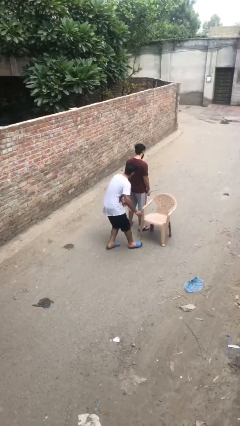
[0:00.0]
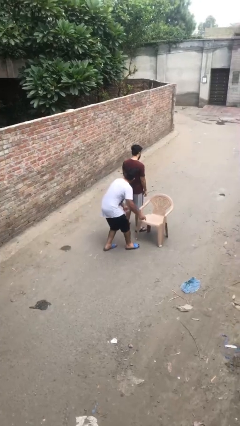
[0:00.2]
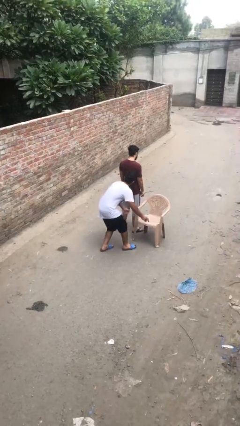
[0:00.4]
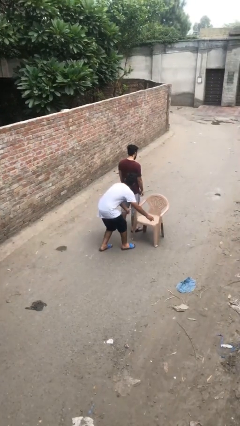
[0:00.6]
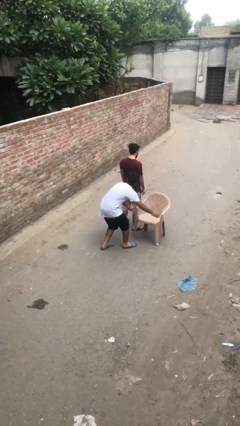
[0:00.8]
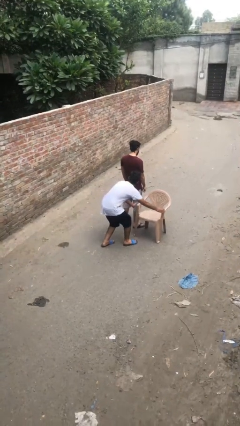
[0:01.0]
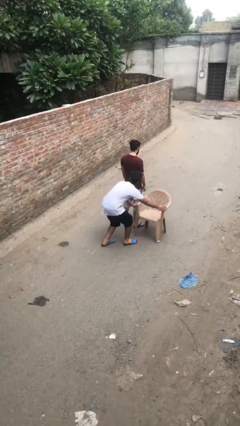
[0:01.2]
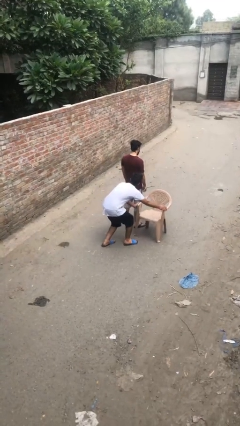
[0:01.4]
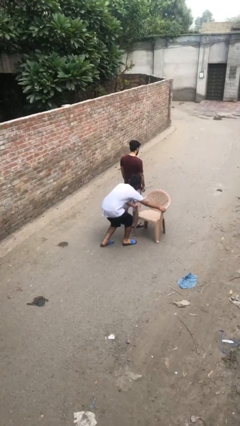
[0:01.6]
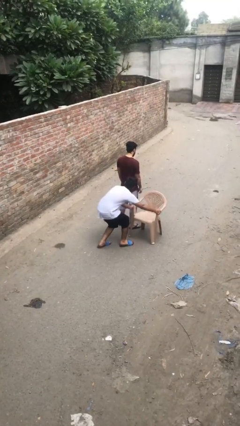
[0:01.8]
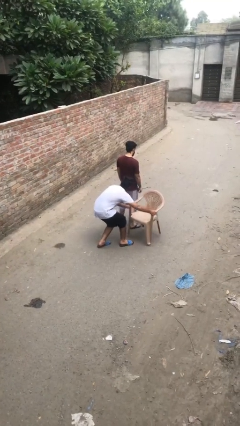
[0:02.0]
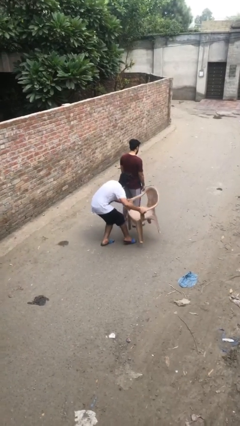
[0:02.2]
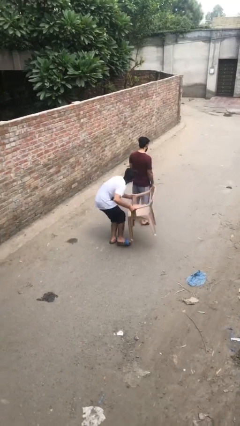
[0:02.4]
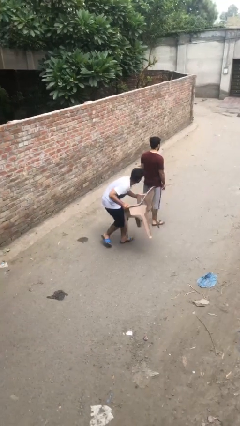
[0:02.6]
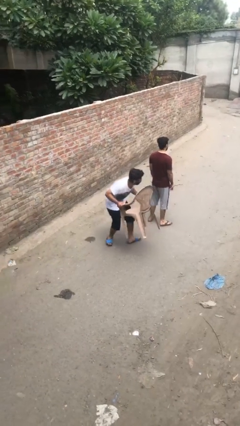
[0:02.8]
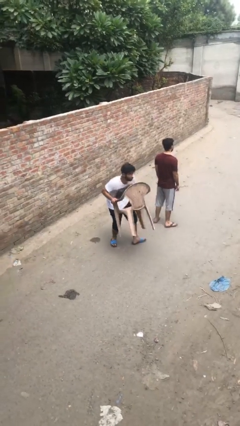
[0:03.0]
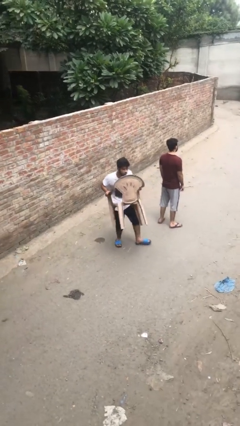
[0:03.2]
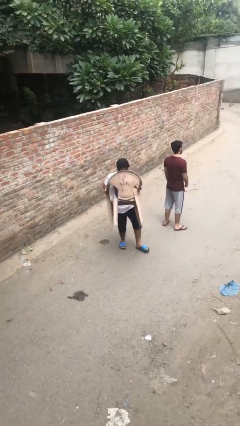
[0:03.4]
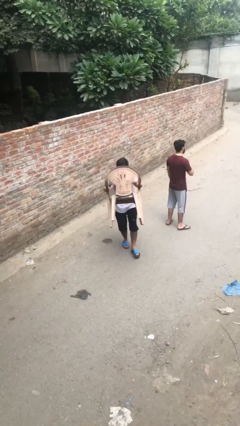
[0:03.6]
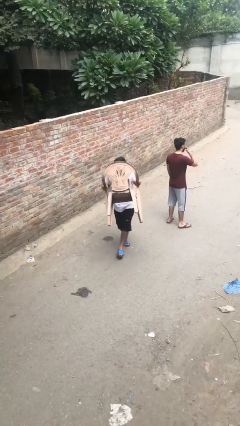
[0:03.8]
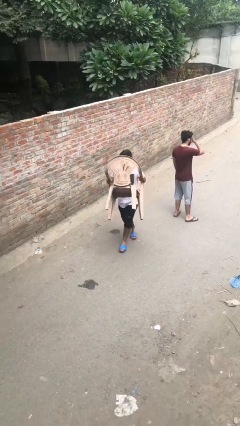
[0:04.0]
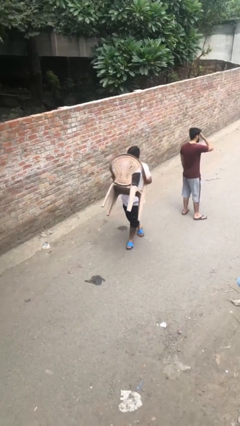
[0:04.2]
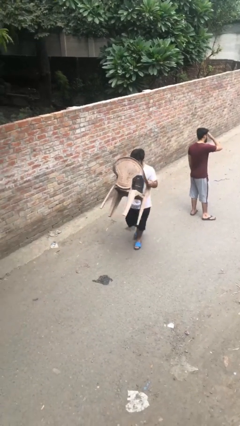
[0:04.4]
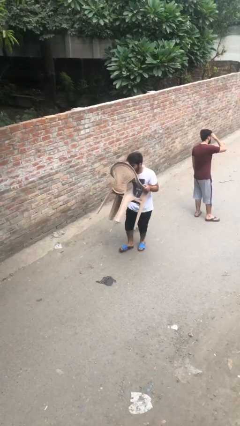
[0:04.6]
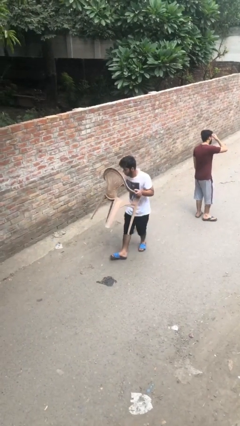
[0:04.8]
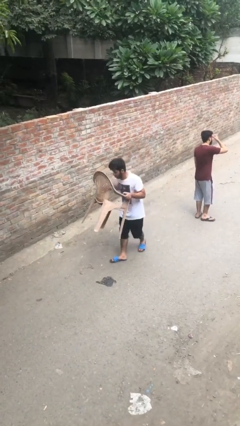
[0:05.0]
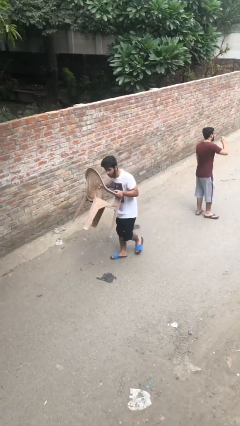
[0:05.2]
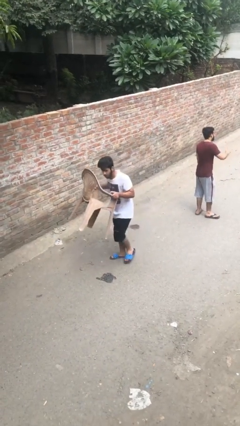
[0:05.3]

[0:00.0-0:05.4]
person steals object from person

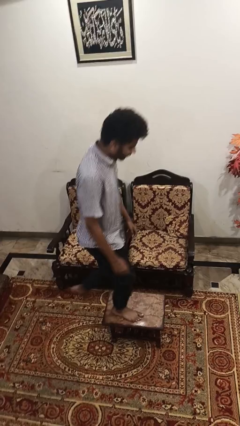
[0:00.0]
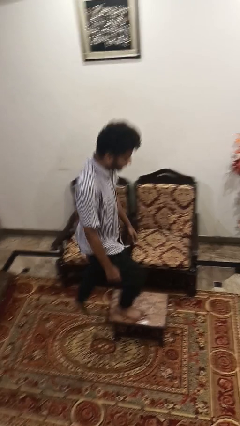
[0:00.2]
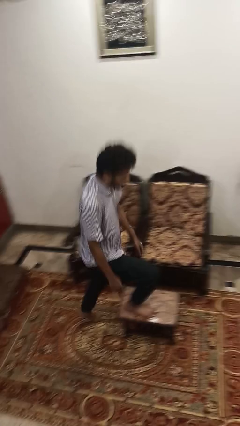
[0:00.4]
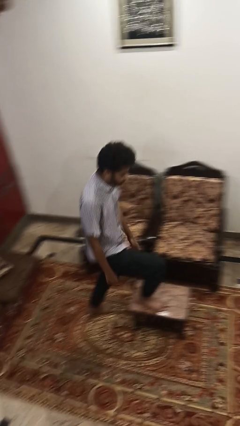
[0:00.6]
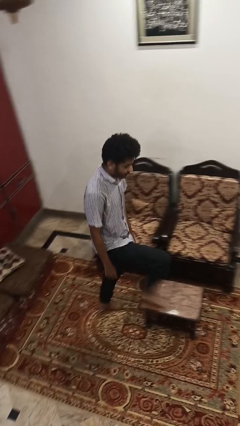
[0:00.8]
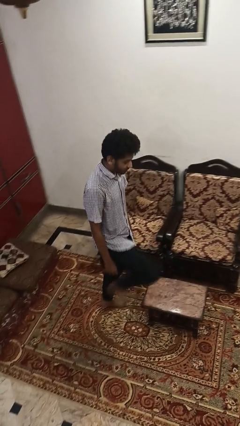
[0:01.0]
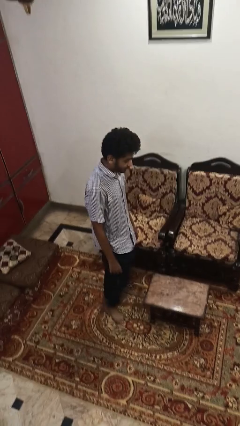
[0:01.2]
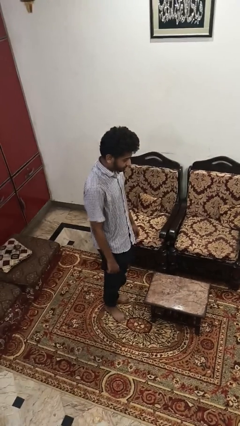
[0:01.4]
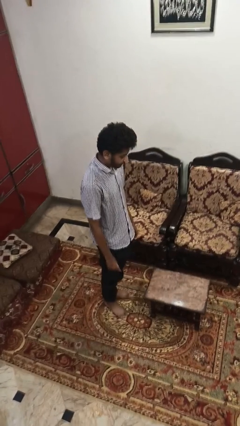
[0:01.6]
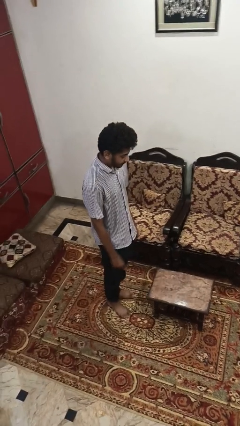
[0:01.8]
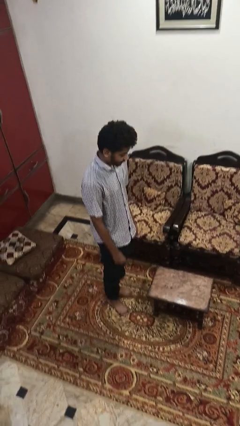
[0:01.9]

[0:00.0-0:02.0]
person climbs off table

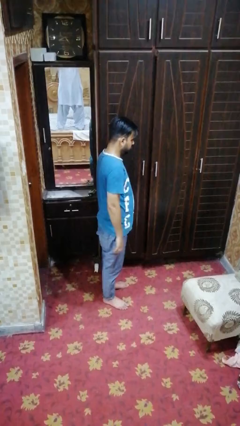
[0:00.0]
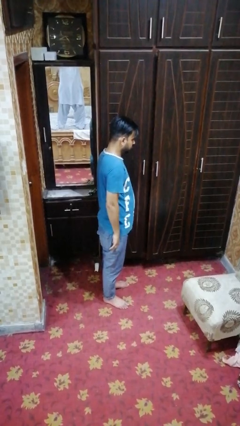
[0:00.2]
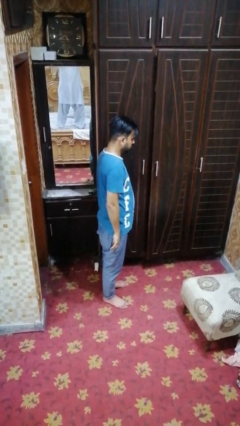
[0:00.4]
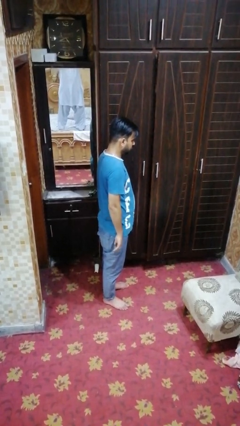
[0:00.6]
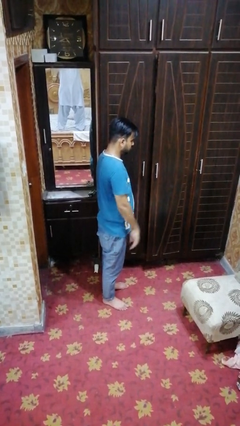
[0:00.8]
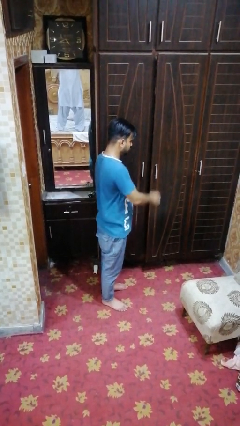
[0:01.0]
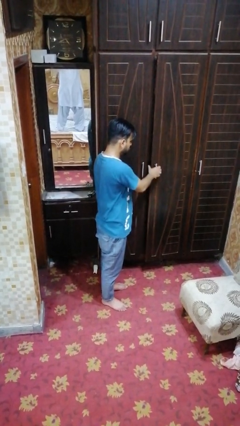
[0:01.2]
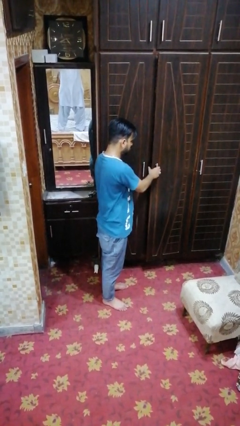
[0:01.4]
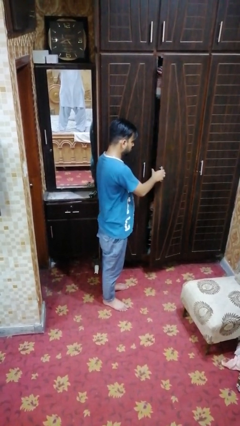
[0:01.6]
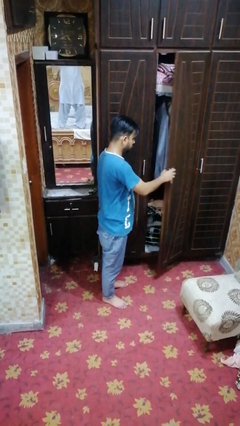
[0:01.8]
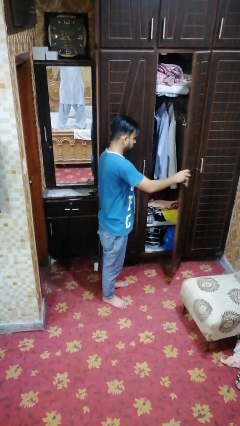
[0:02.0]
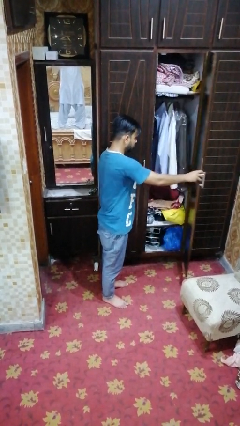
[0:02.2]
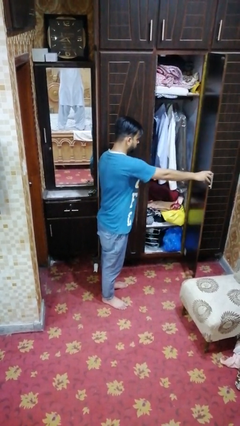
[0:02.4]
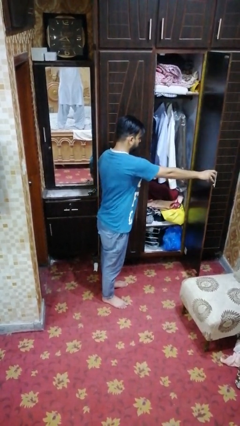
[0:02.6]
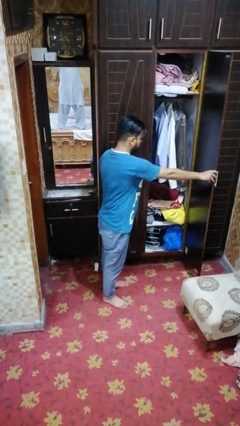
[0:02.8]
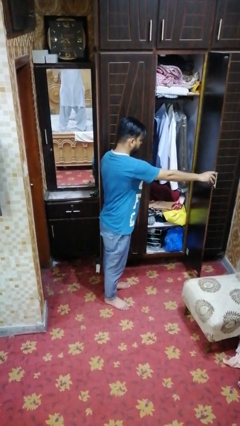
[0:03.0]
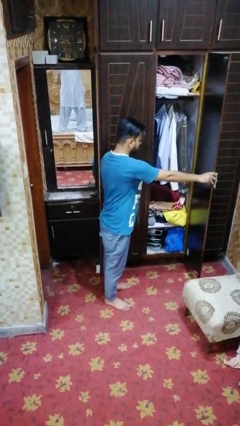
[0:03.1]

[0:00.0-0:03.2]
person opens closet door

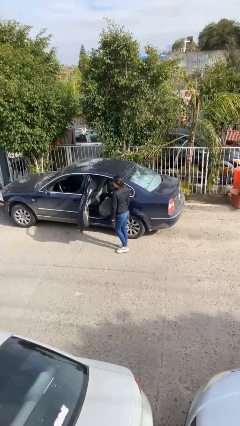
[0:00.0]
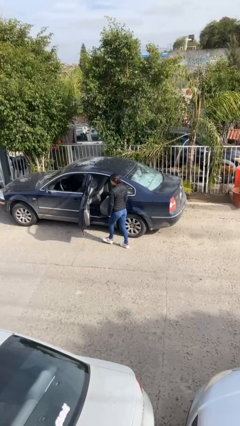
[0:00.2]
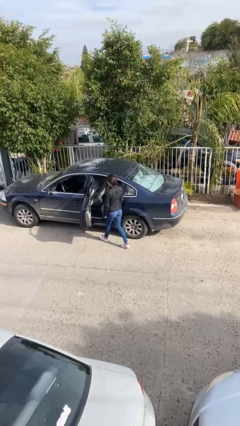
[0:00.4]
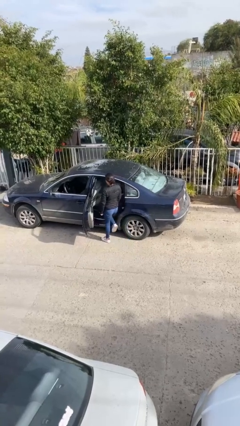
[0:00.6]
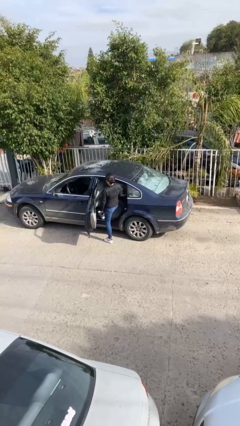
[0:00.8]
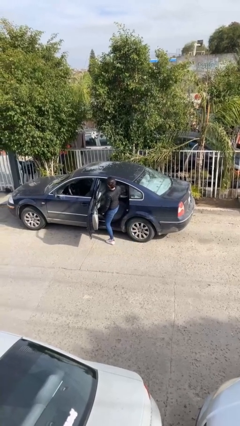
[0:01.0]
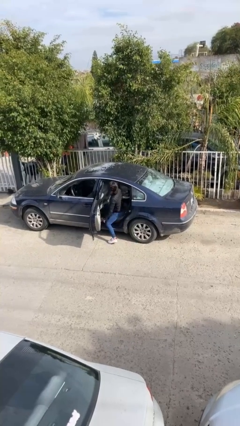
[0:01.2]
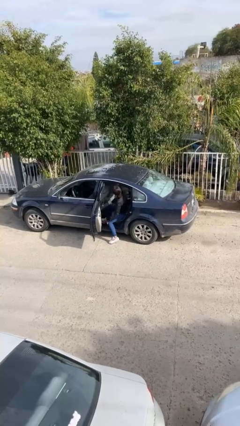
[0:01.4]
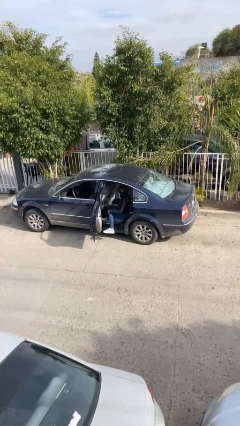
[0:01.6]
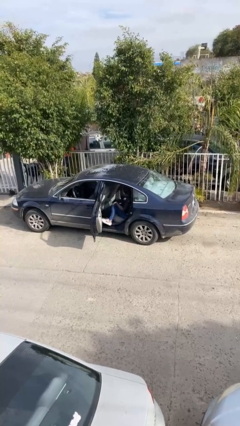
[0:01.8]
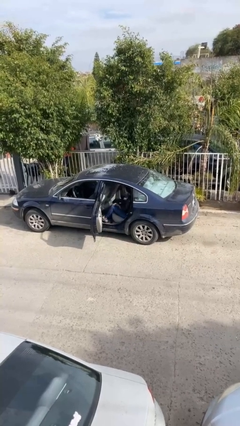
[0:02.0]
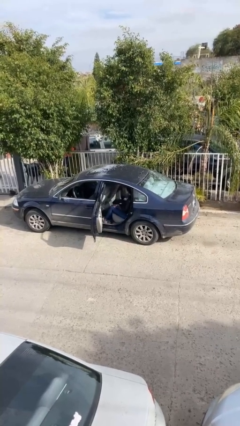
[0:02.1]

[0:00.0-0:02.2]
person enters car

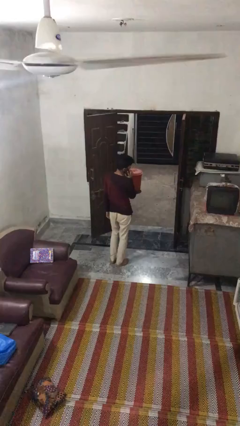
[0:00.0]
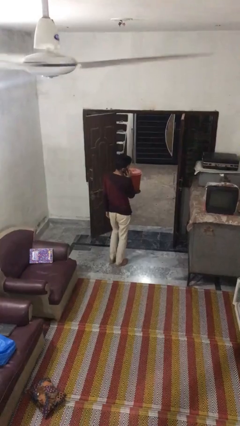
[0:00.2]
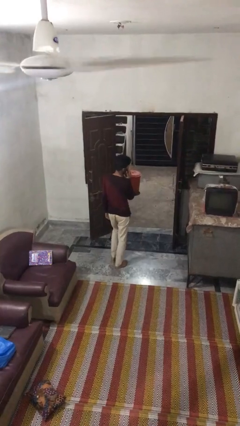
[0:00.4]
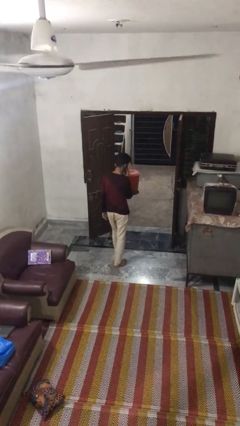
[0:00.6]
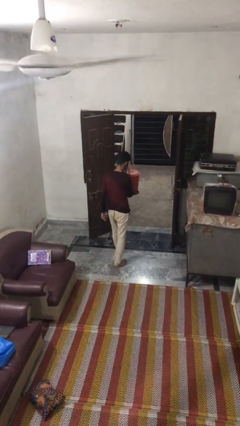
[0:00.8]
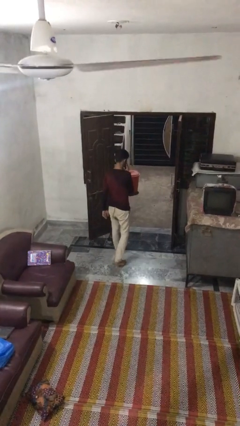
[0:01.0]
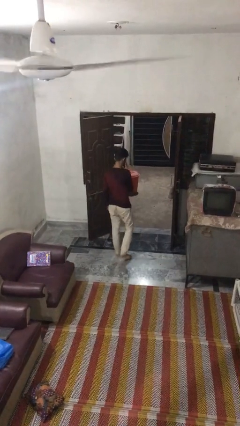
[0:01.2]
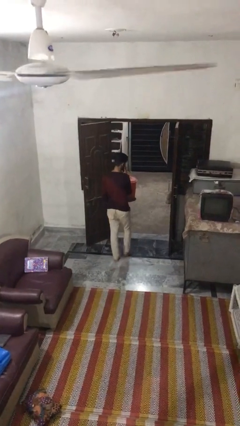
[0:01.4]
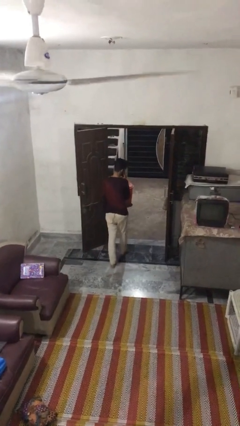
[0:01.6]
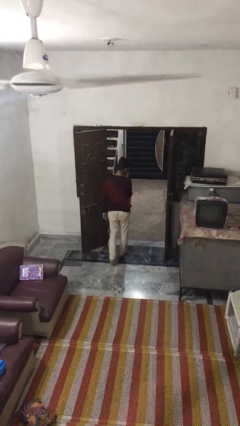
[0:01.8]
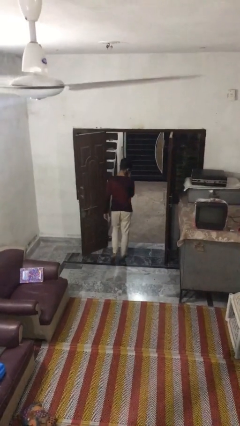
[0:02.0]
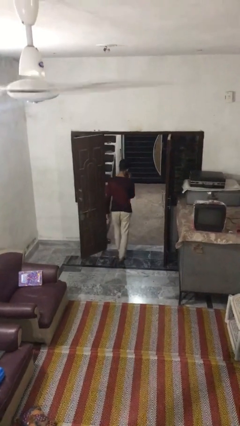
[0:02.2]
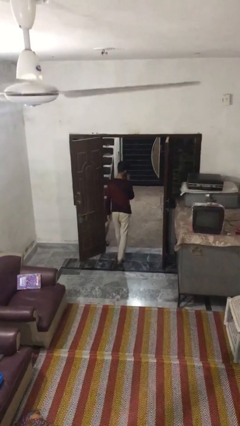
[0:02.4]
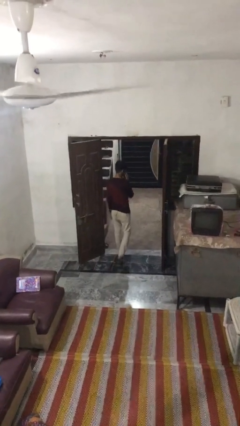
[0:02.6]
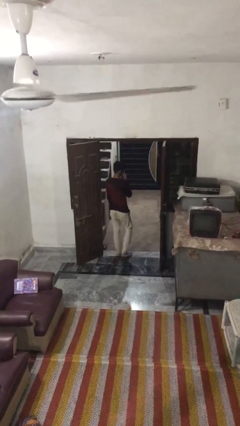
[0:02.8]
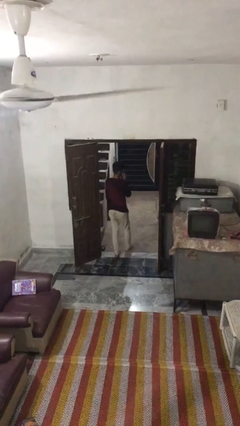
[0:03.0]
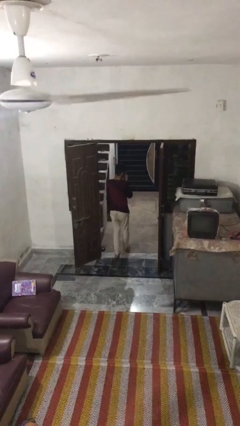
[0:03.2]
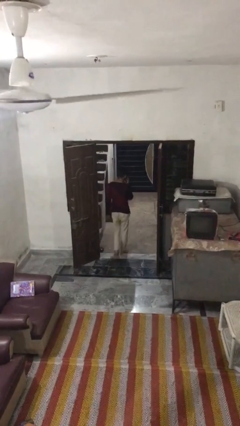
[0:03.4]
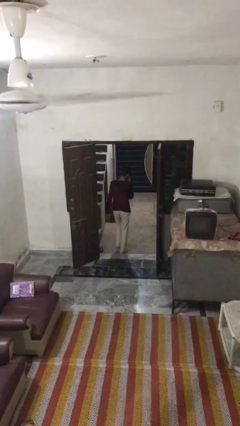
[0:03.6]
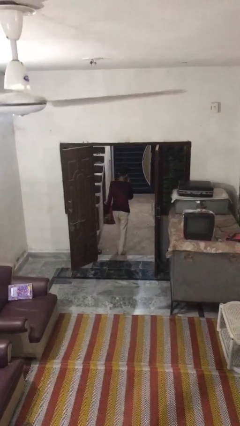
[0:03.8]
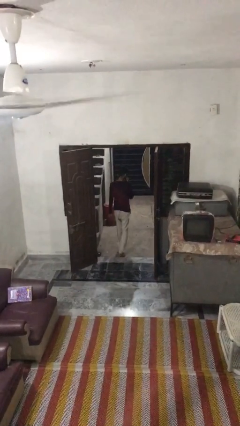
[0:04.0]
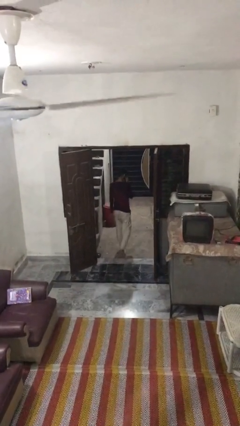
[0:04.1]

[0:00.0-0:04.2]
person exits scene through structure

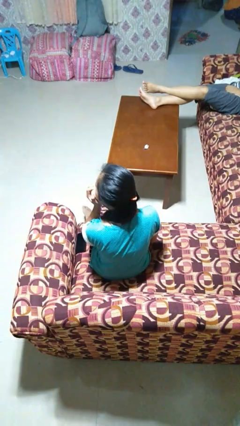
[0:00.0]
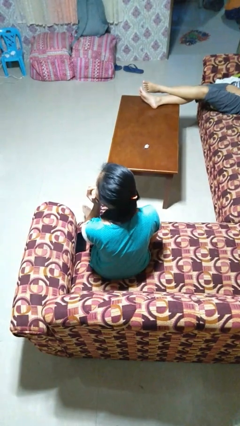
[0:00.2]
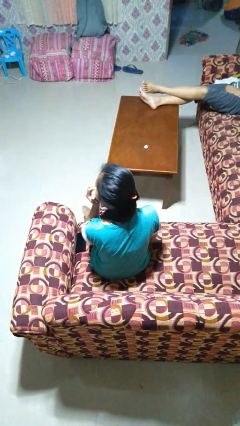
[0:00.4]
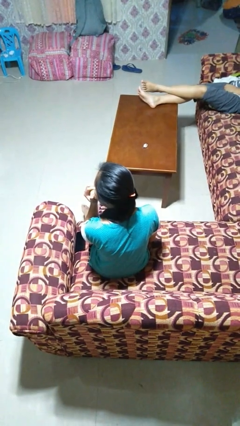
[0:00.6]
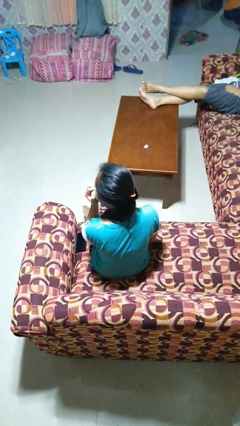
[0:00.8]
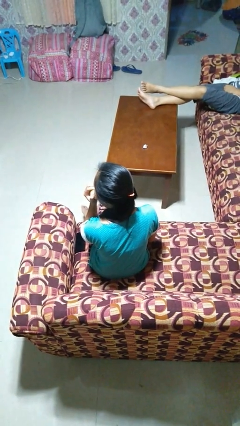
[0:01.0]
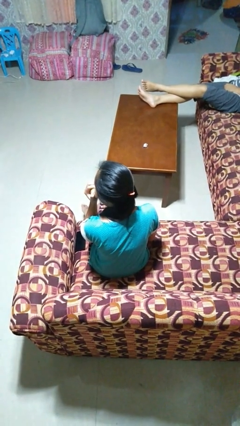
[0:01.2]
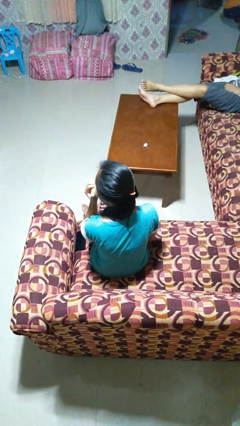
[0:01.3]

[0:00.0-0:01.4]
person eats apple
